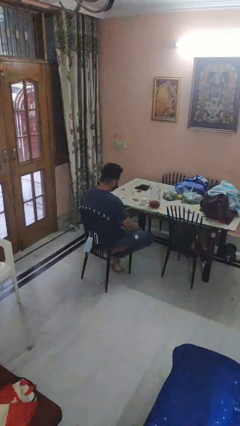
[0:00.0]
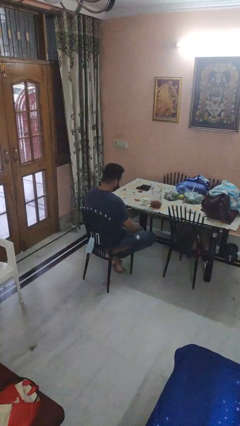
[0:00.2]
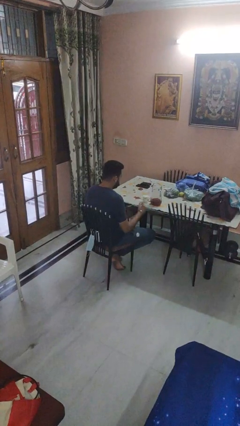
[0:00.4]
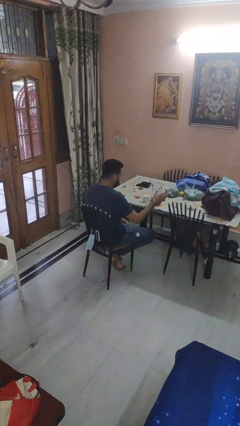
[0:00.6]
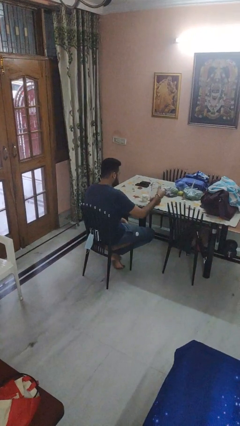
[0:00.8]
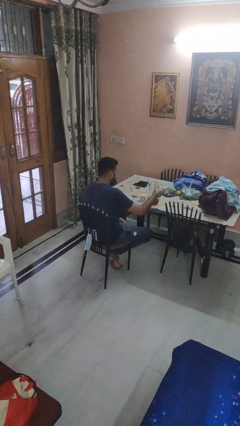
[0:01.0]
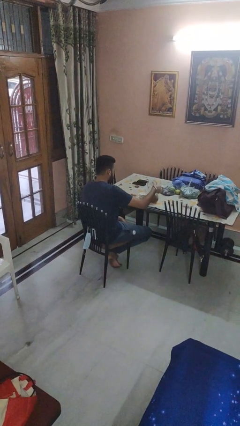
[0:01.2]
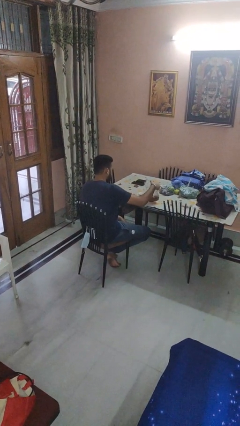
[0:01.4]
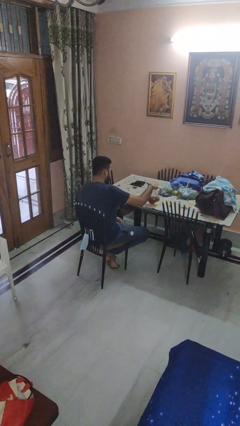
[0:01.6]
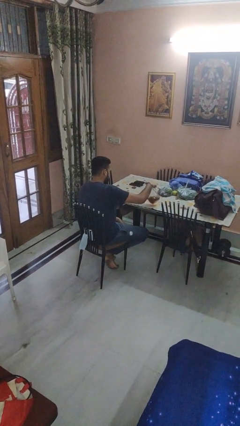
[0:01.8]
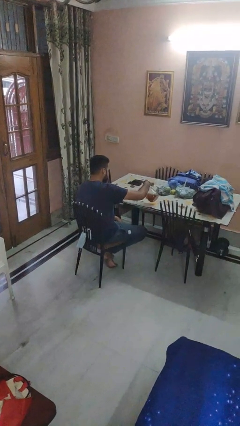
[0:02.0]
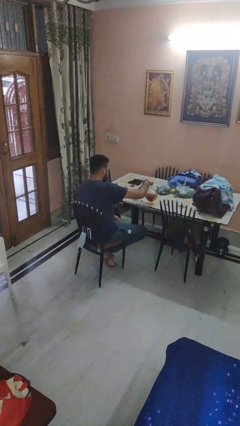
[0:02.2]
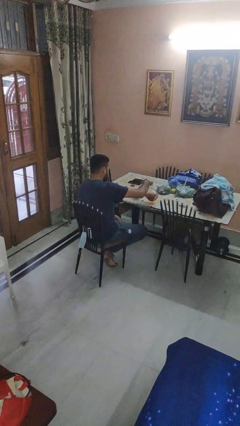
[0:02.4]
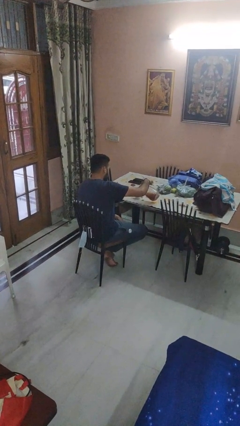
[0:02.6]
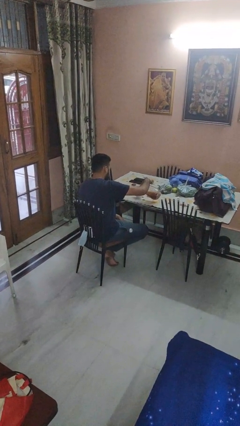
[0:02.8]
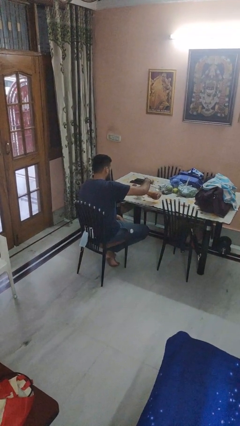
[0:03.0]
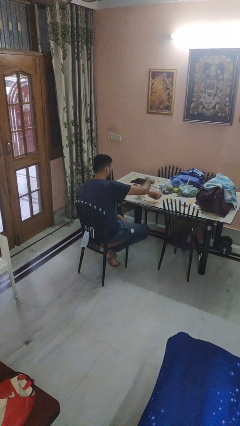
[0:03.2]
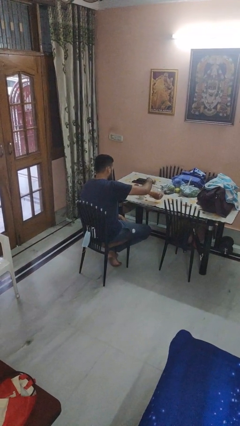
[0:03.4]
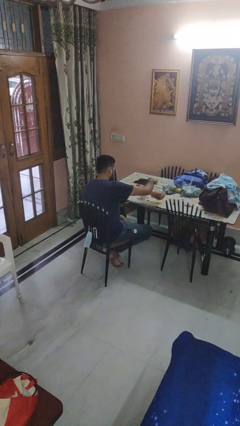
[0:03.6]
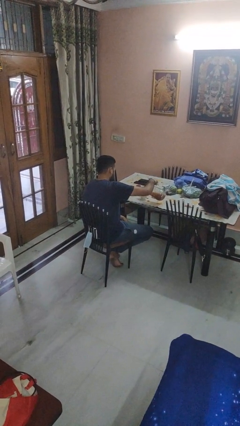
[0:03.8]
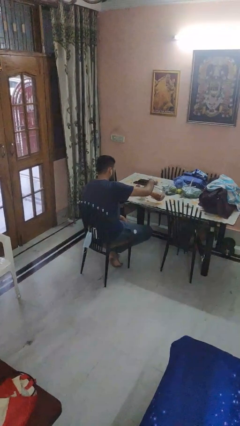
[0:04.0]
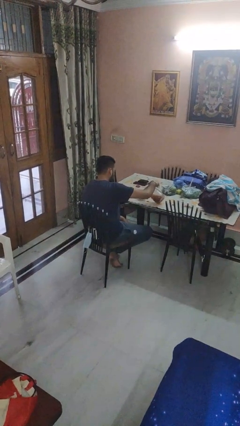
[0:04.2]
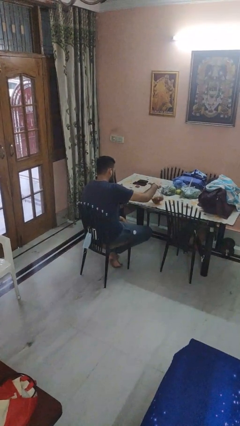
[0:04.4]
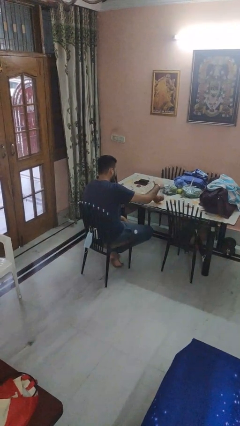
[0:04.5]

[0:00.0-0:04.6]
person pours coffee into mug

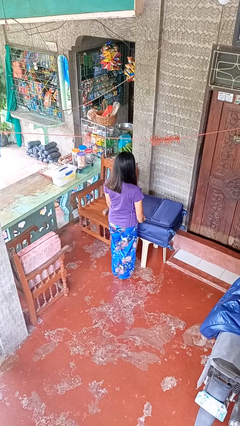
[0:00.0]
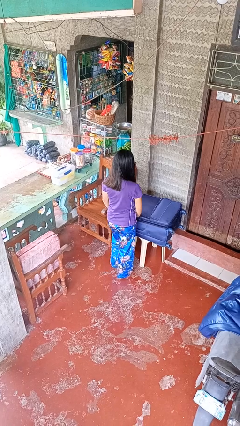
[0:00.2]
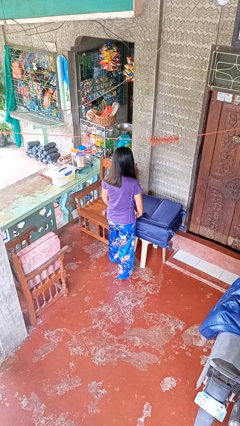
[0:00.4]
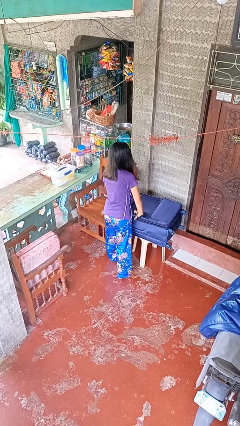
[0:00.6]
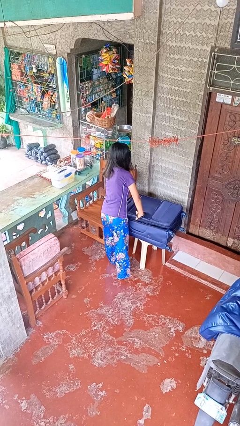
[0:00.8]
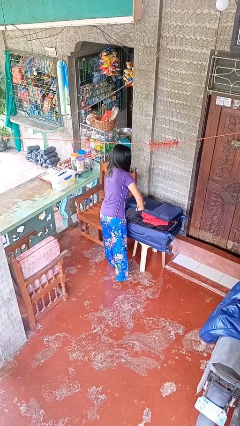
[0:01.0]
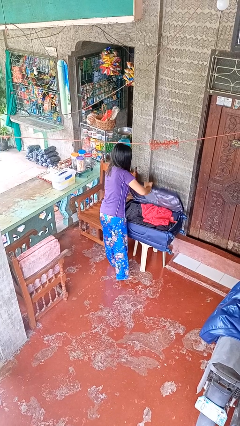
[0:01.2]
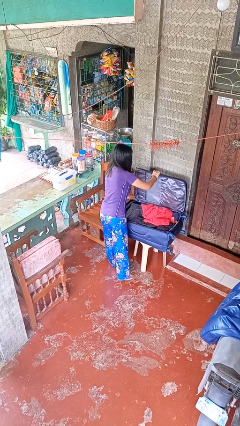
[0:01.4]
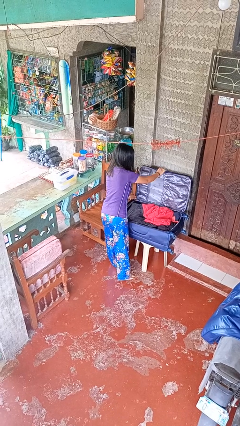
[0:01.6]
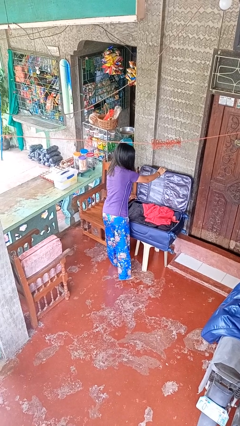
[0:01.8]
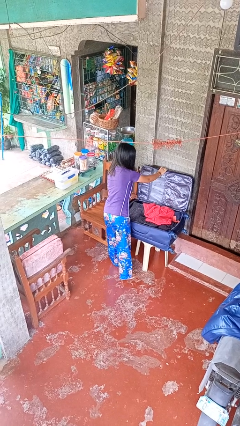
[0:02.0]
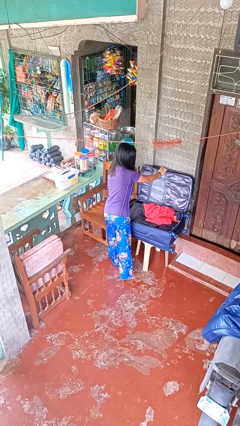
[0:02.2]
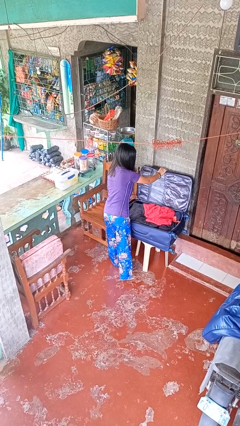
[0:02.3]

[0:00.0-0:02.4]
person opens suitcase

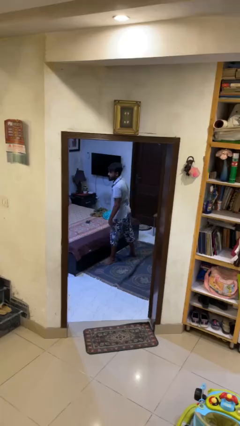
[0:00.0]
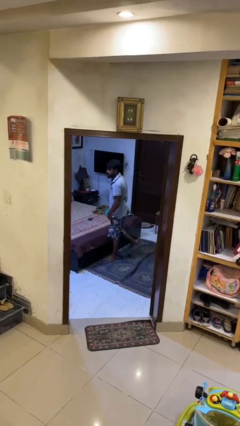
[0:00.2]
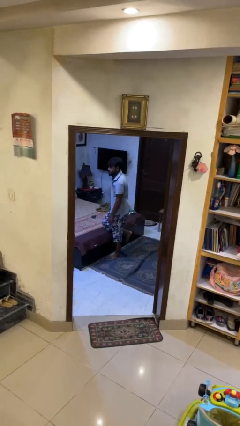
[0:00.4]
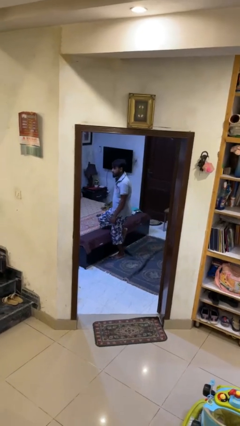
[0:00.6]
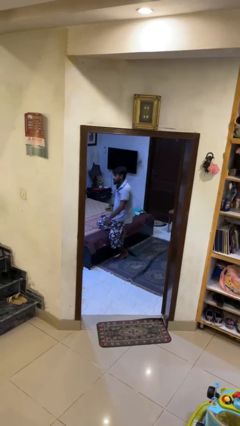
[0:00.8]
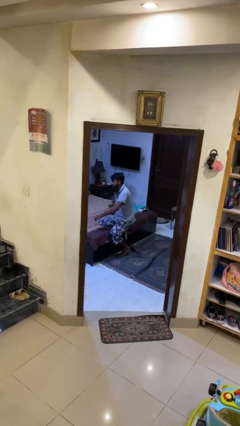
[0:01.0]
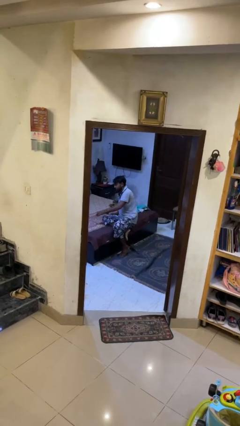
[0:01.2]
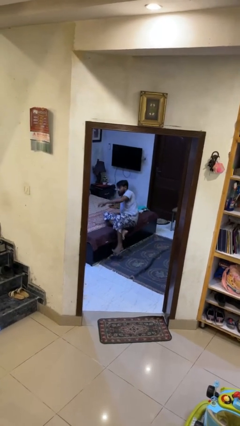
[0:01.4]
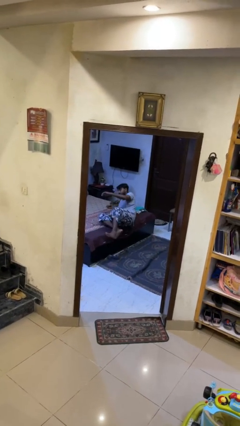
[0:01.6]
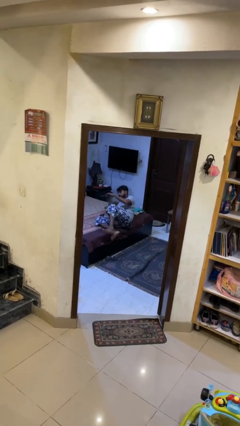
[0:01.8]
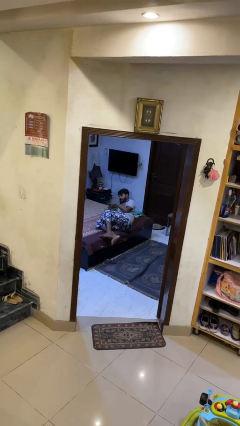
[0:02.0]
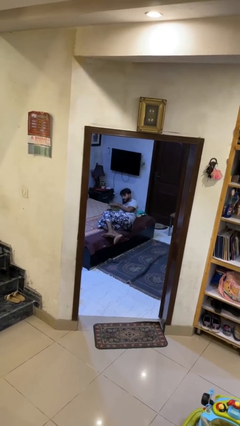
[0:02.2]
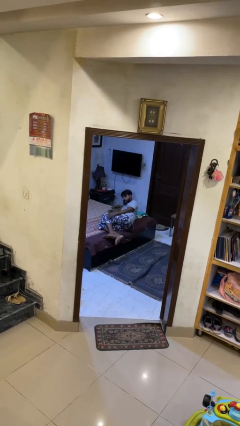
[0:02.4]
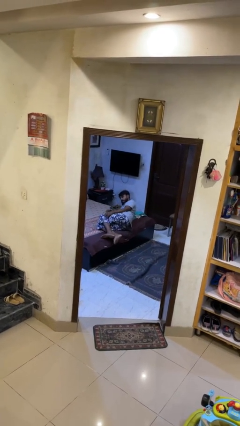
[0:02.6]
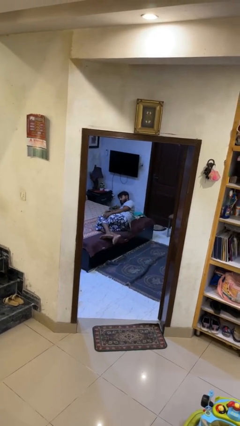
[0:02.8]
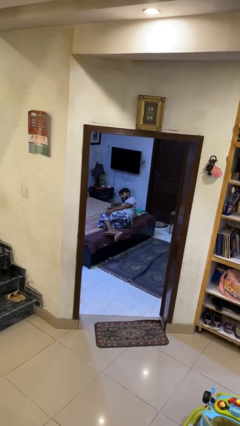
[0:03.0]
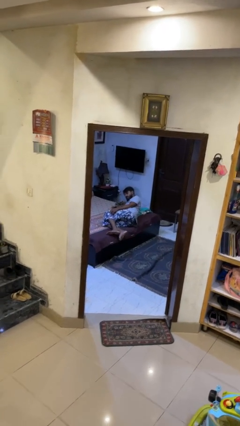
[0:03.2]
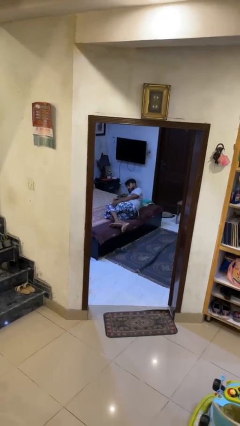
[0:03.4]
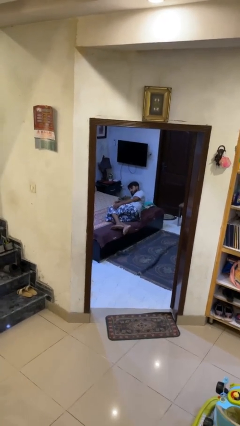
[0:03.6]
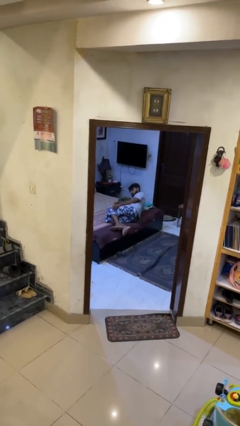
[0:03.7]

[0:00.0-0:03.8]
person lies down on bed

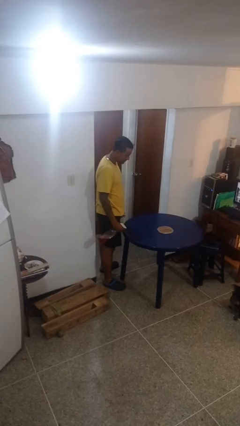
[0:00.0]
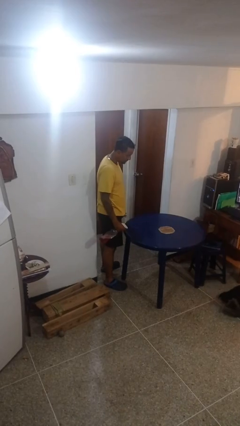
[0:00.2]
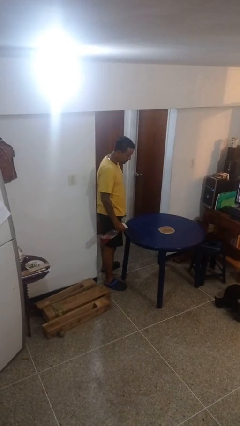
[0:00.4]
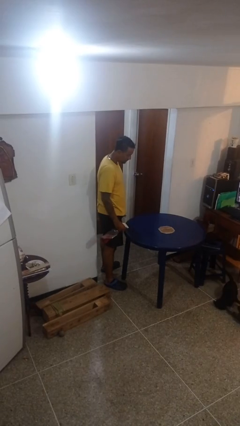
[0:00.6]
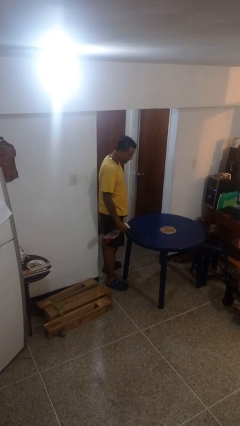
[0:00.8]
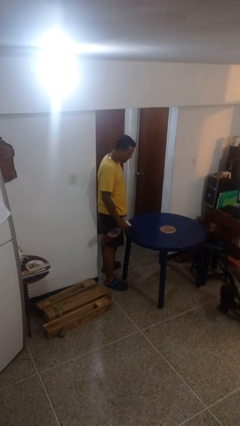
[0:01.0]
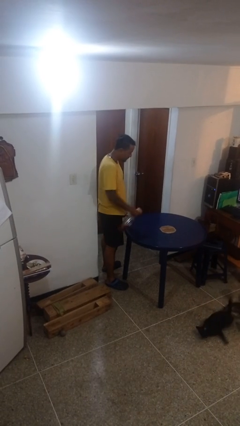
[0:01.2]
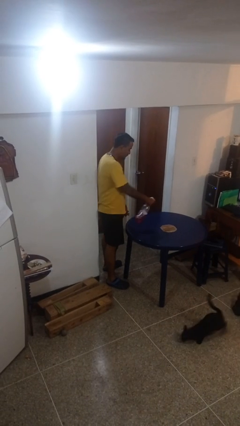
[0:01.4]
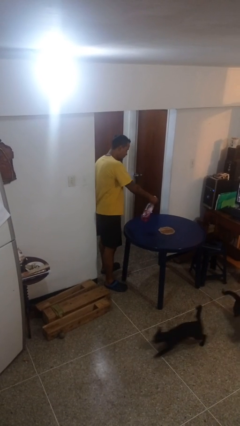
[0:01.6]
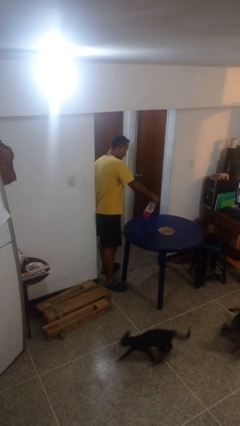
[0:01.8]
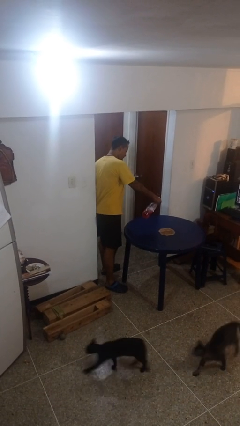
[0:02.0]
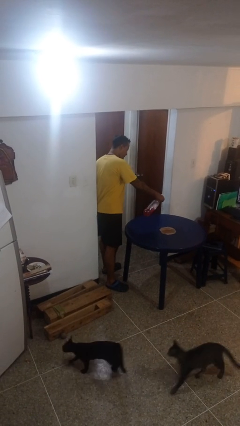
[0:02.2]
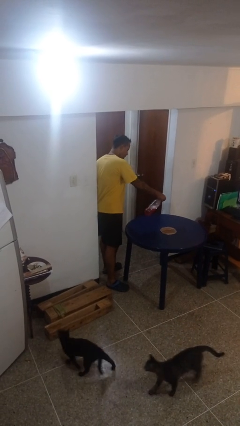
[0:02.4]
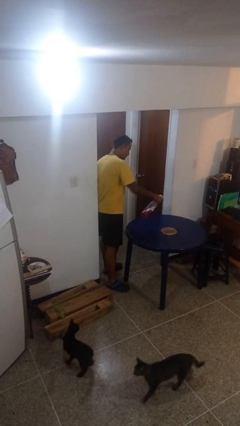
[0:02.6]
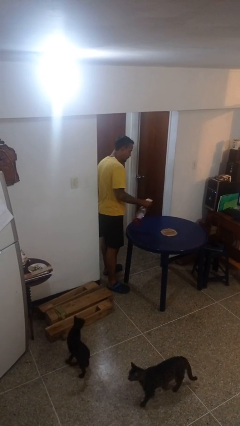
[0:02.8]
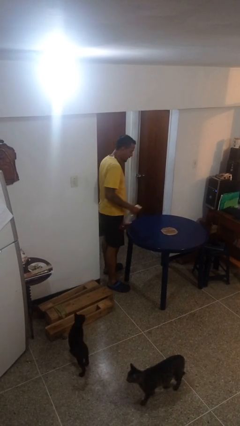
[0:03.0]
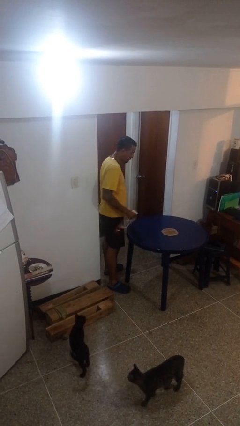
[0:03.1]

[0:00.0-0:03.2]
person sprays from bottle

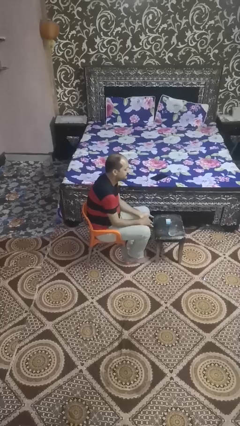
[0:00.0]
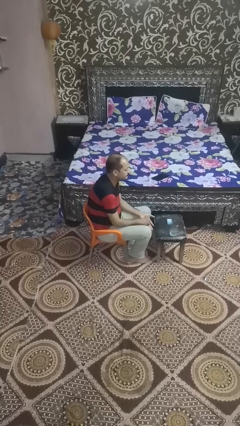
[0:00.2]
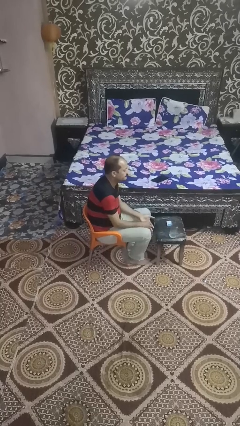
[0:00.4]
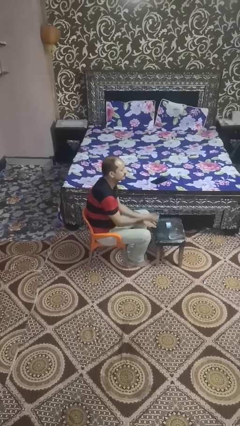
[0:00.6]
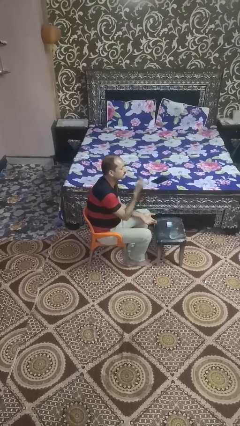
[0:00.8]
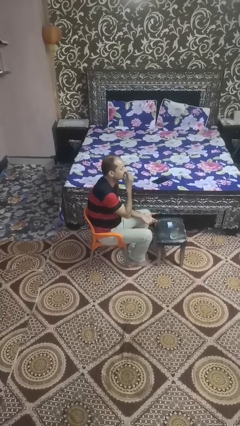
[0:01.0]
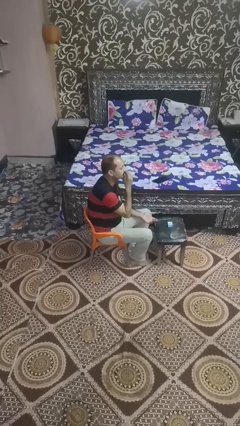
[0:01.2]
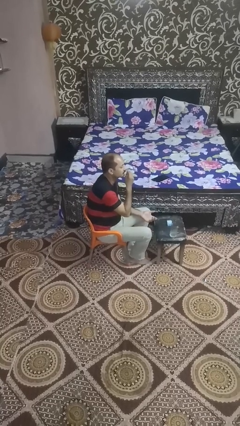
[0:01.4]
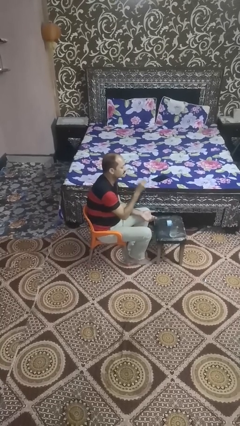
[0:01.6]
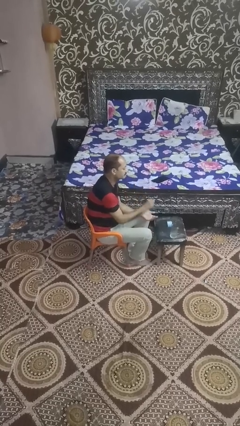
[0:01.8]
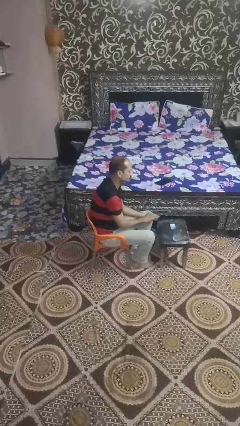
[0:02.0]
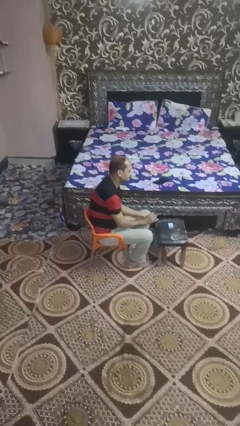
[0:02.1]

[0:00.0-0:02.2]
person spills on table

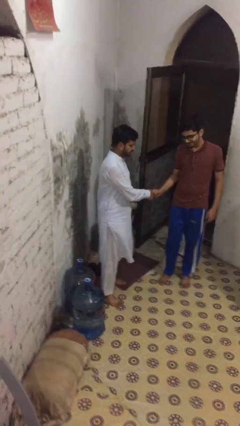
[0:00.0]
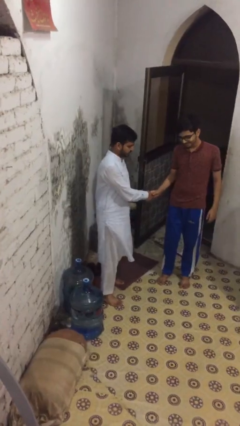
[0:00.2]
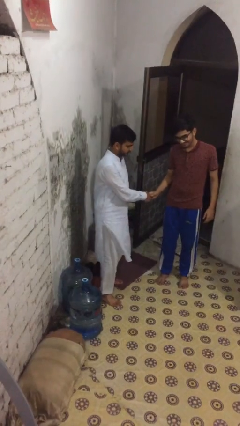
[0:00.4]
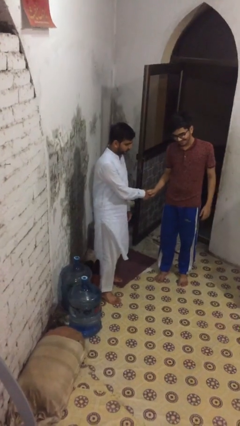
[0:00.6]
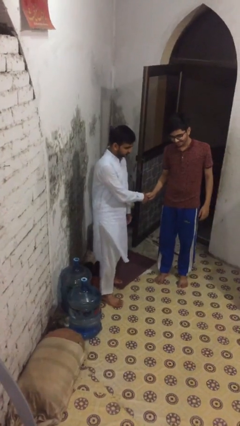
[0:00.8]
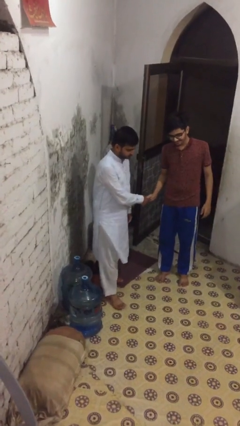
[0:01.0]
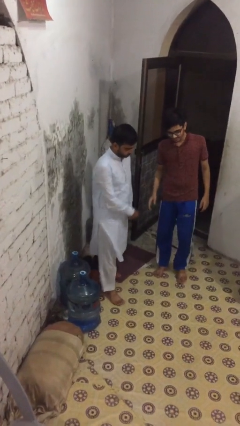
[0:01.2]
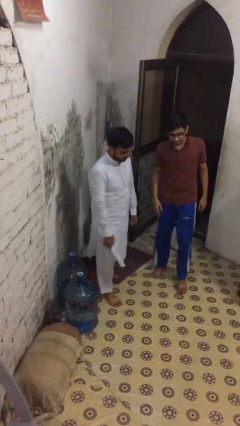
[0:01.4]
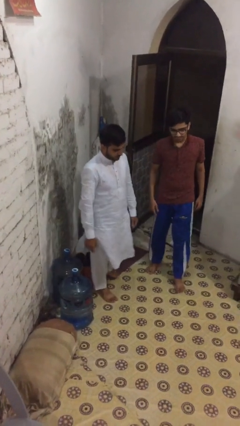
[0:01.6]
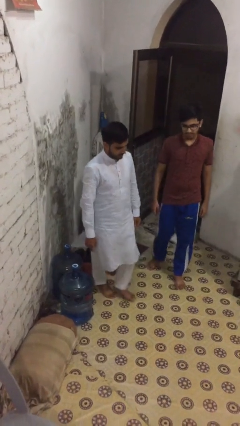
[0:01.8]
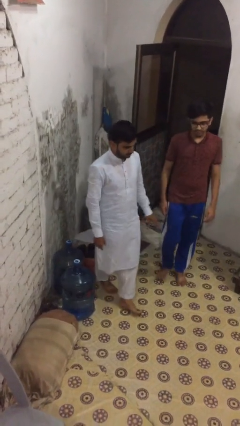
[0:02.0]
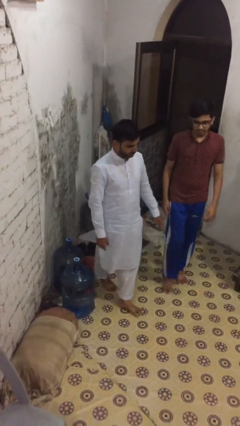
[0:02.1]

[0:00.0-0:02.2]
person talks to person
